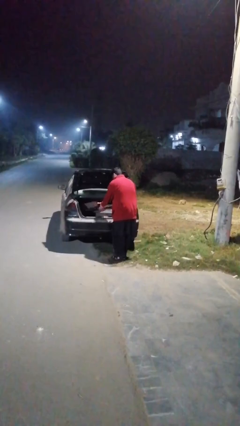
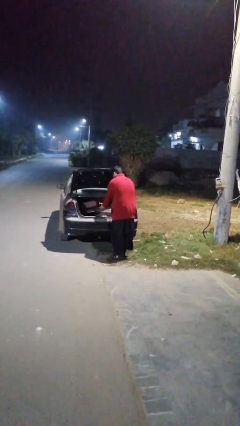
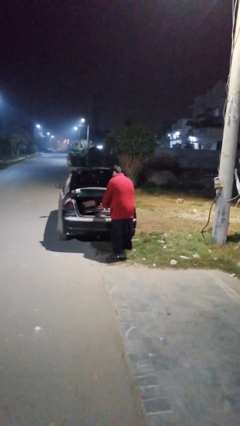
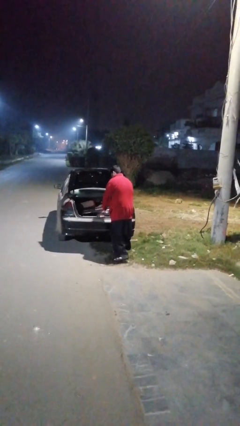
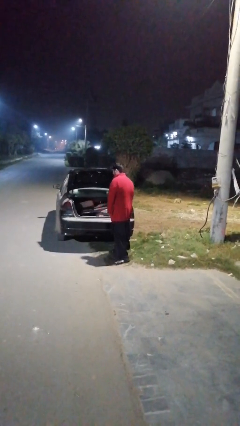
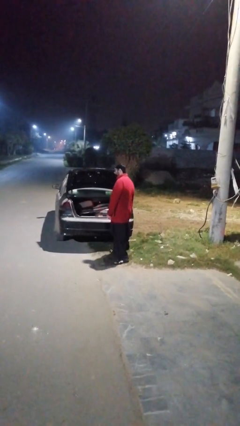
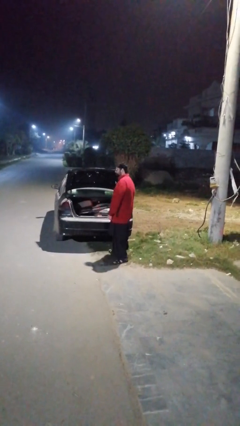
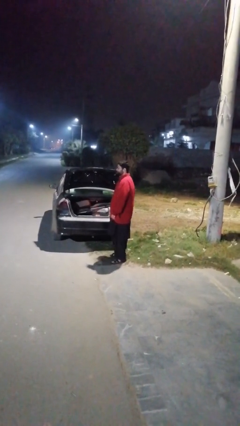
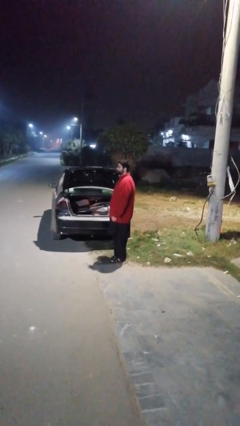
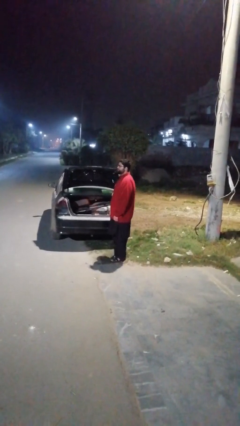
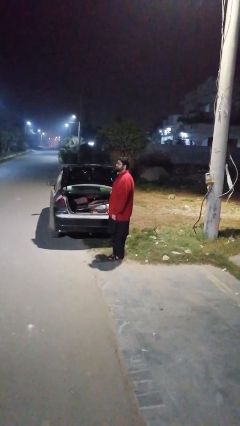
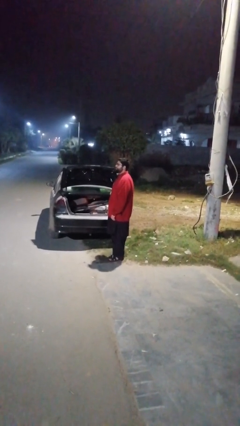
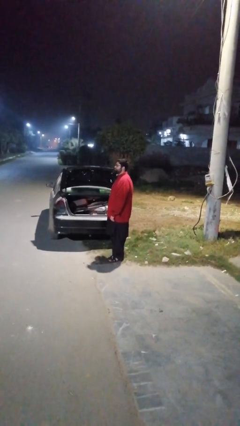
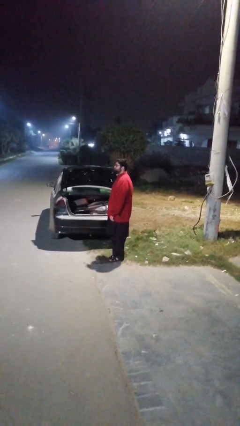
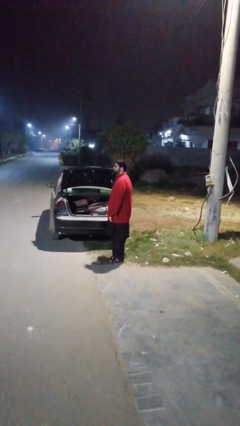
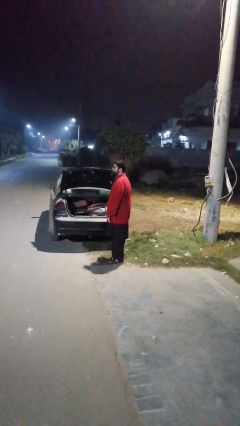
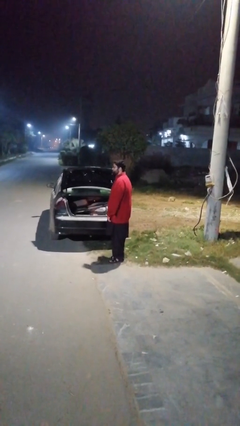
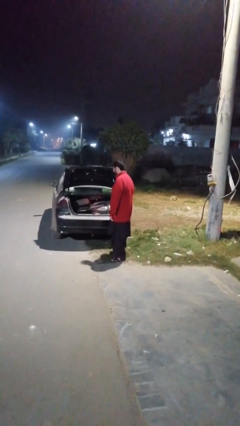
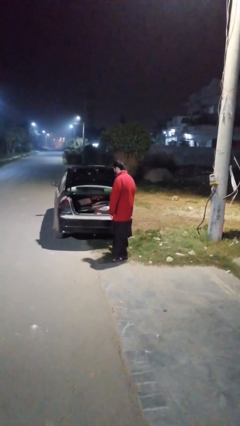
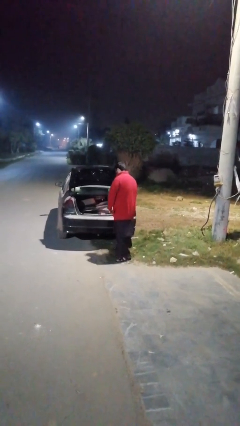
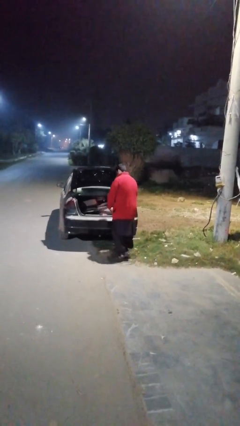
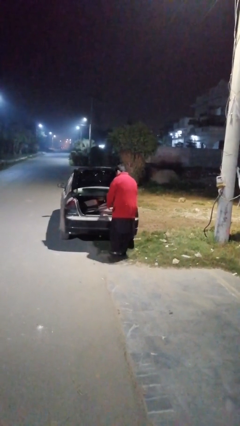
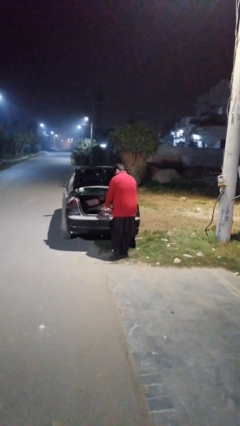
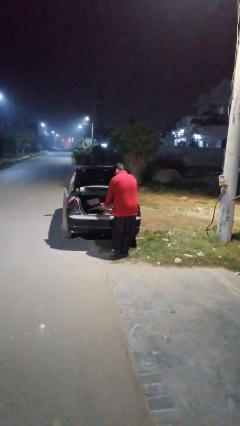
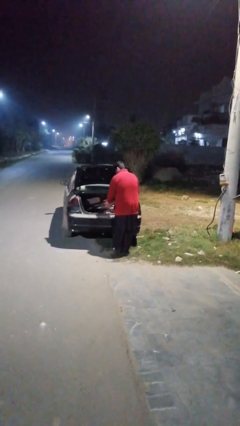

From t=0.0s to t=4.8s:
person loads car

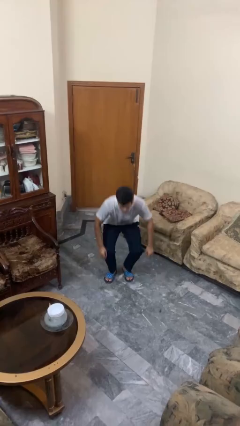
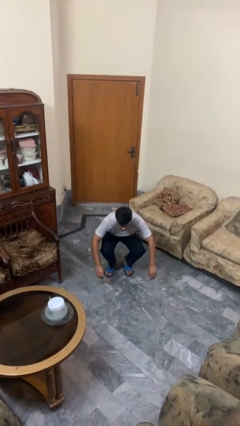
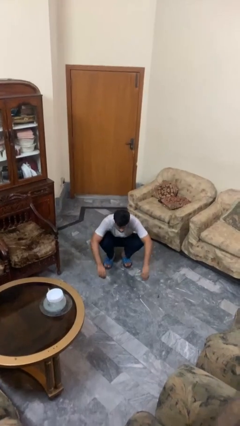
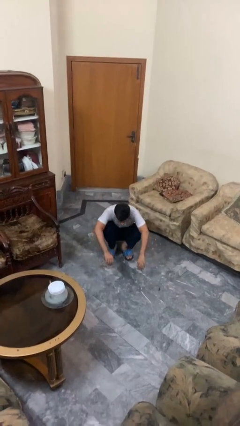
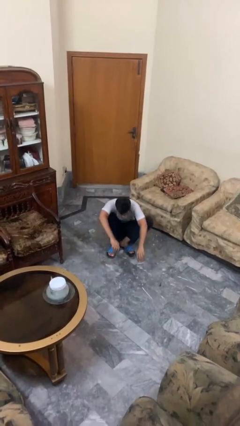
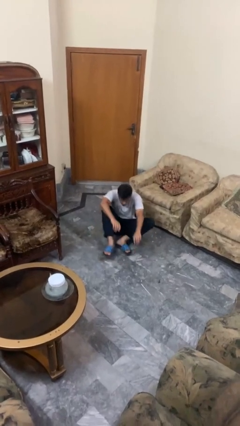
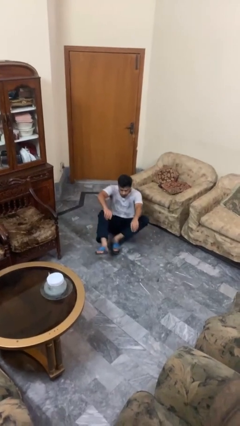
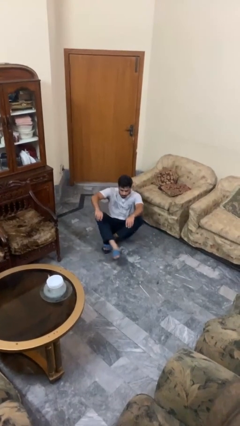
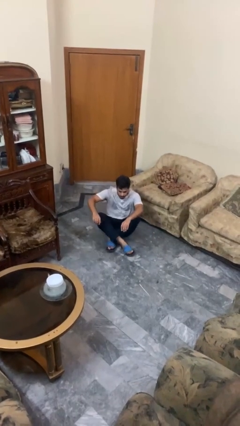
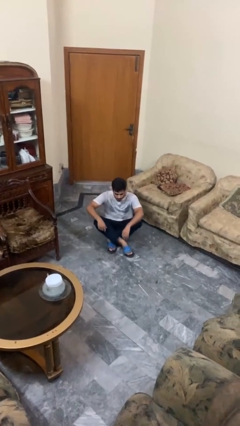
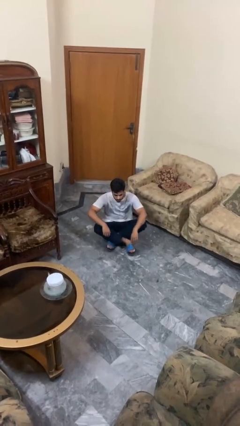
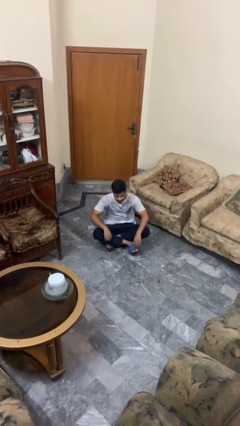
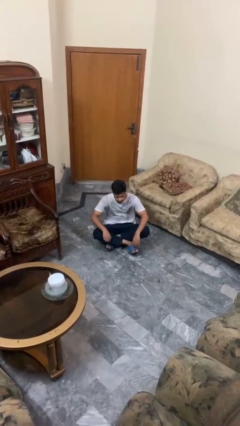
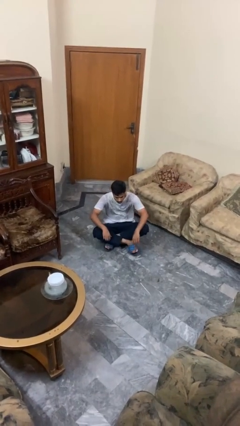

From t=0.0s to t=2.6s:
person sits crisscross

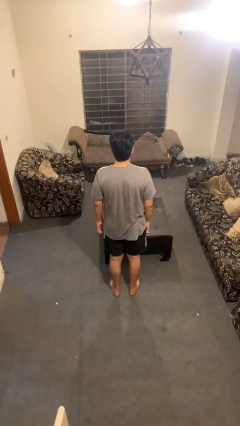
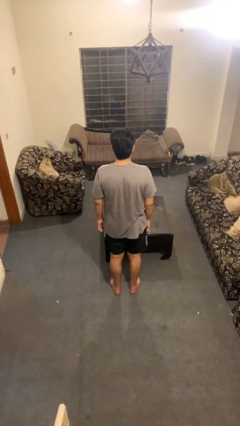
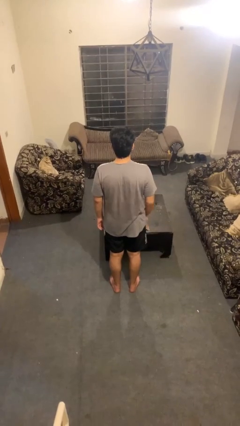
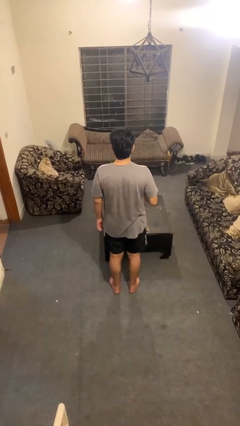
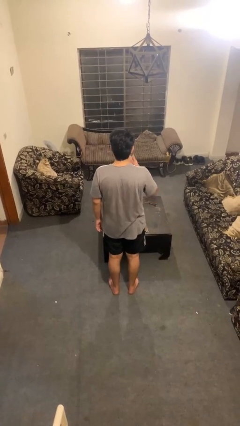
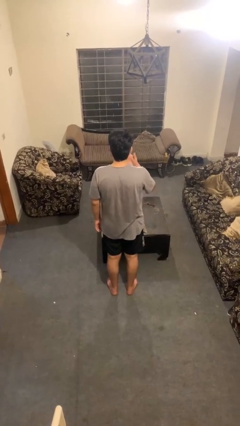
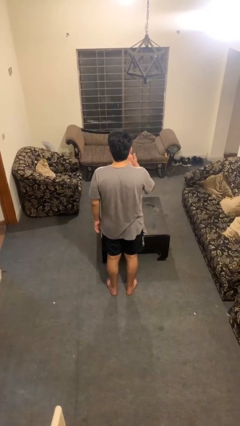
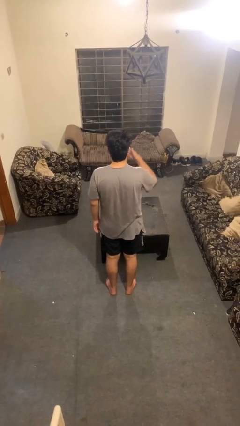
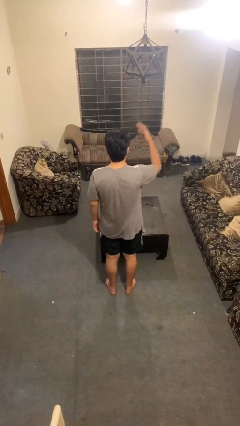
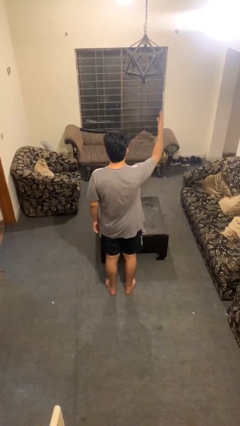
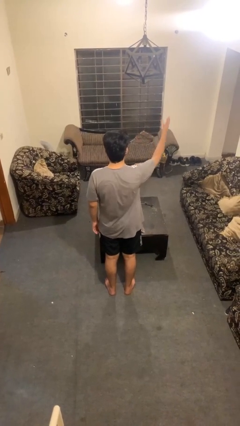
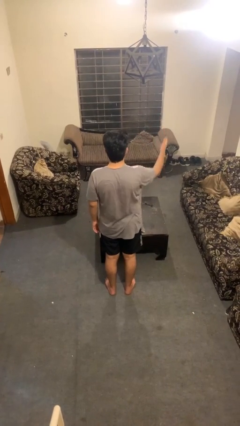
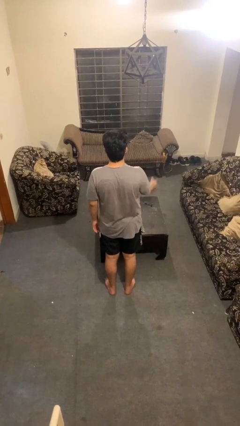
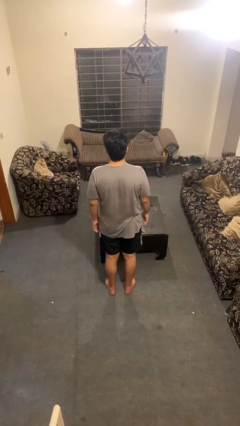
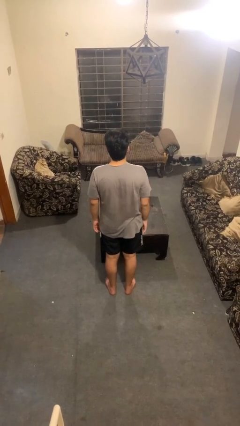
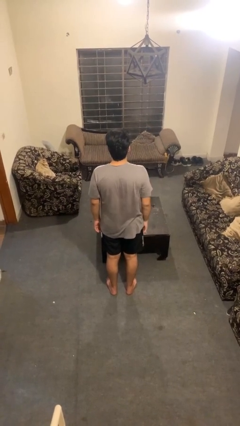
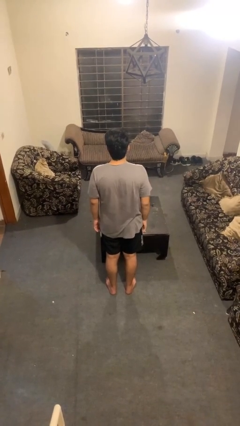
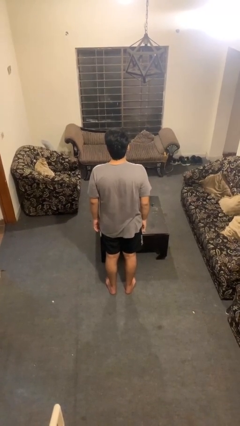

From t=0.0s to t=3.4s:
person gestures blow kiss

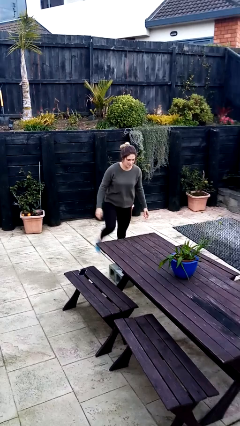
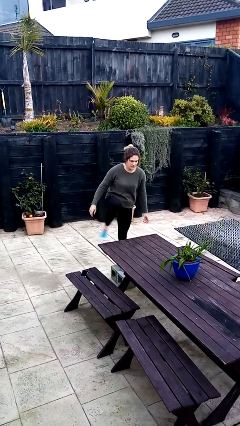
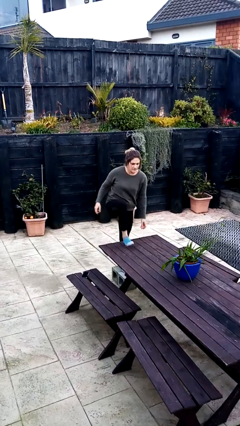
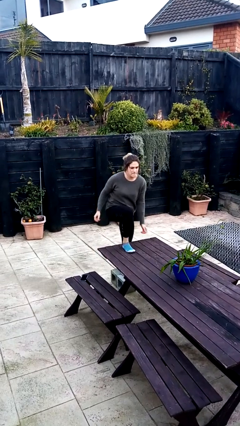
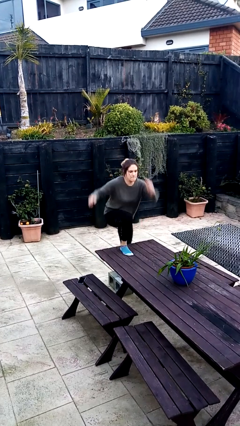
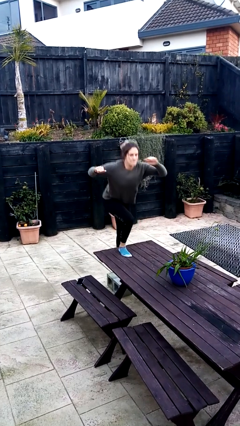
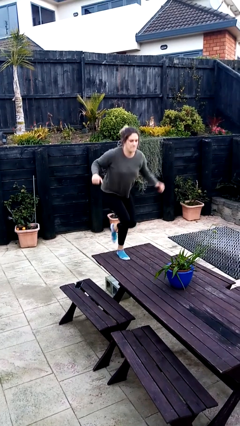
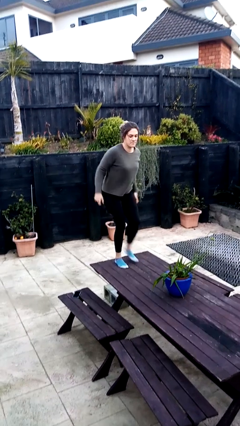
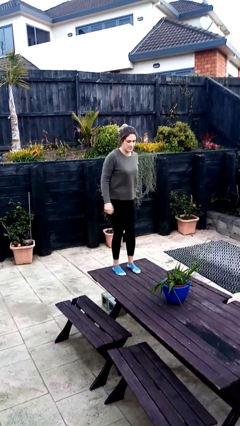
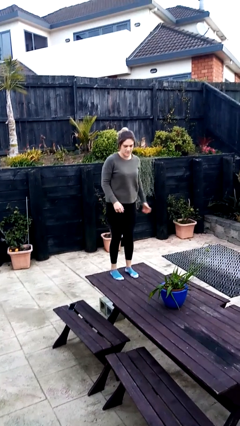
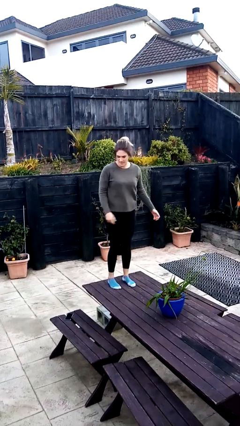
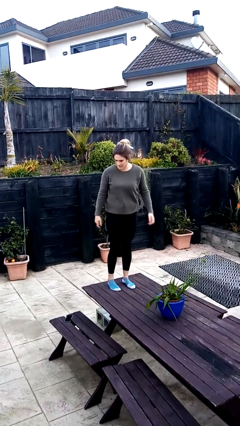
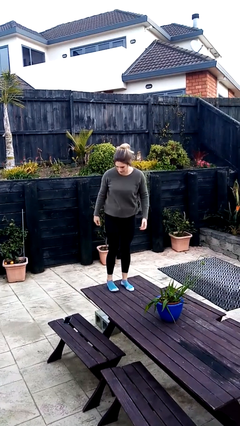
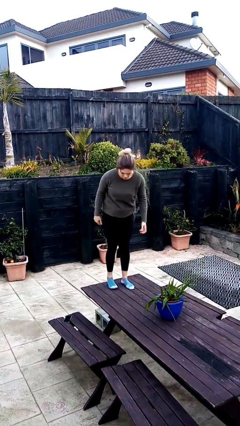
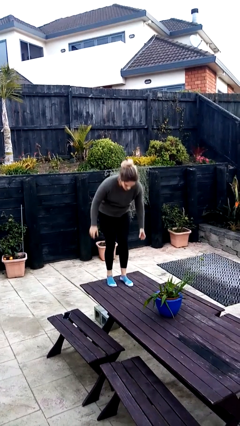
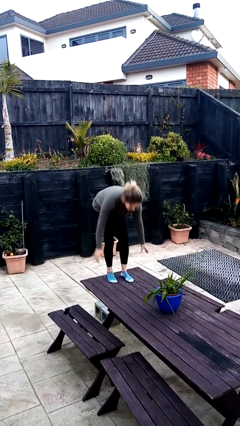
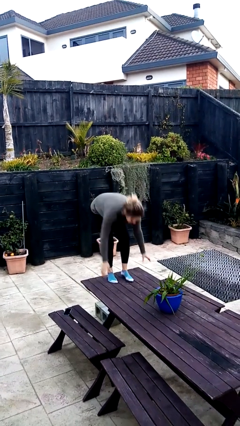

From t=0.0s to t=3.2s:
person climbs on table

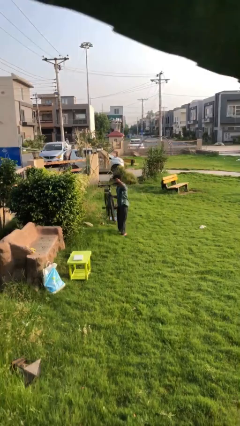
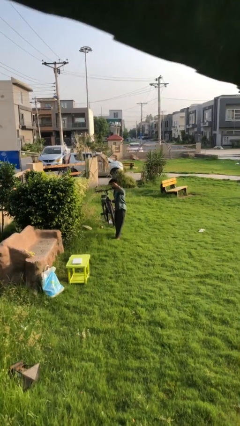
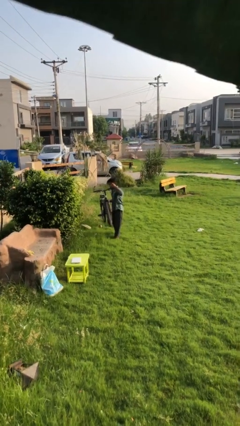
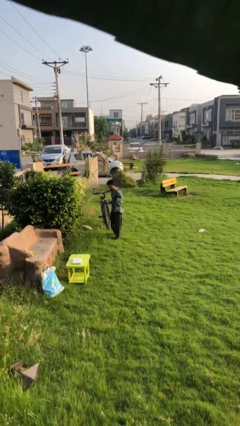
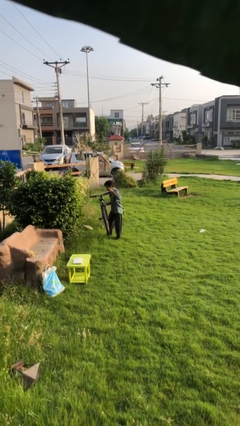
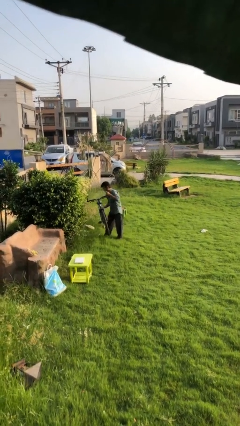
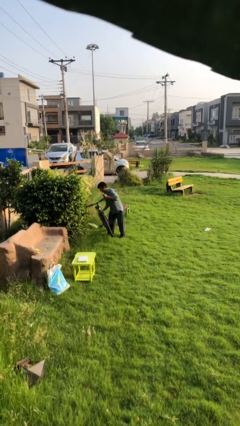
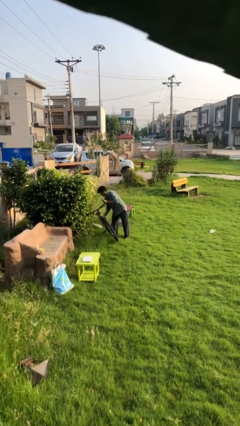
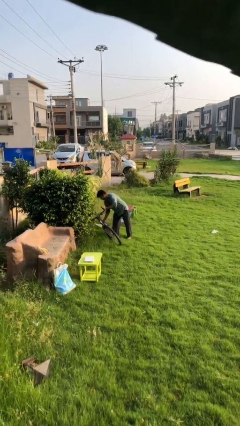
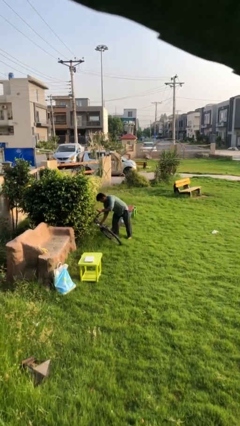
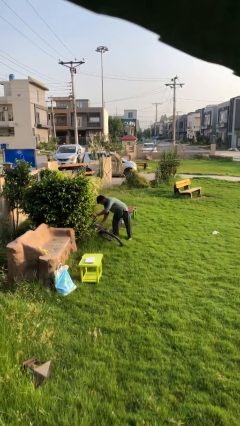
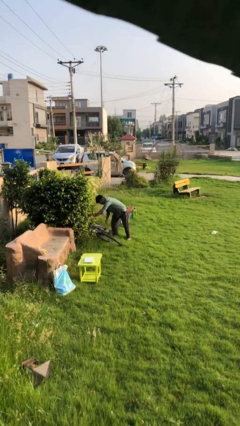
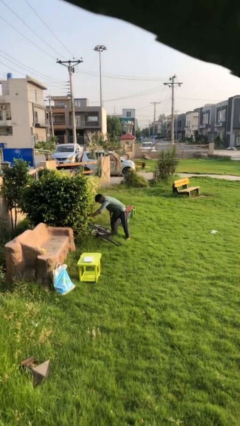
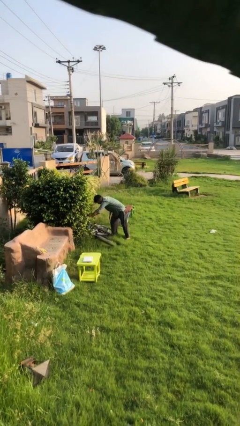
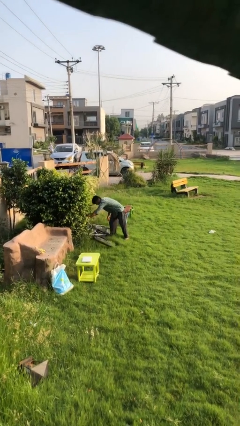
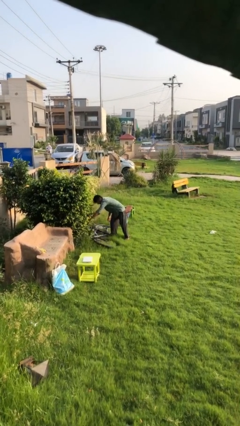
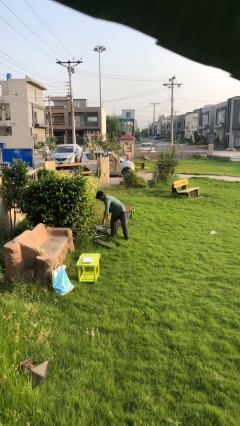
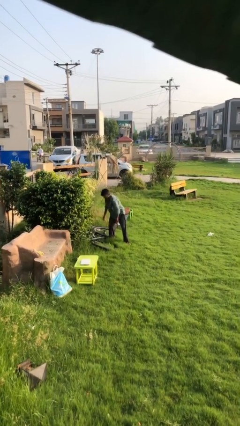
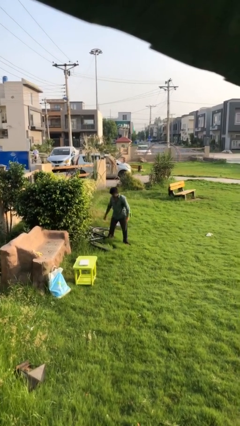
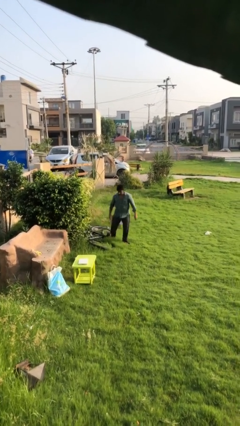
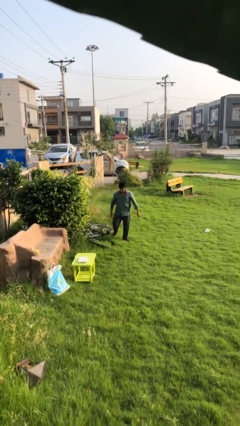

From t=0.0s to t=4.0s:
person puts down object on floor
